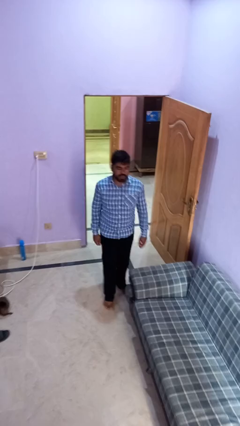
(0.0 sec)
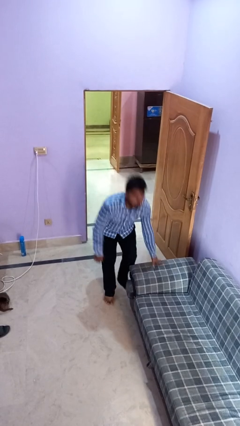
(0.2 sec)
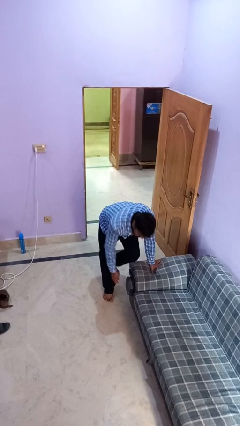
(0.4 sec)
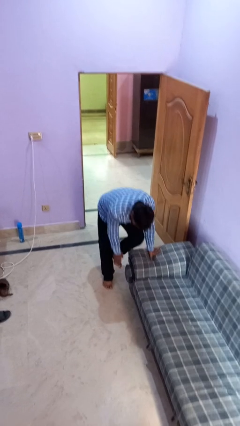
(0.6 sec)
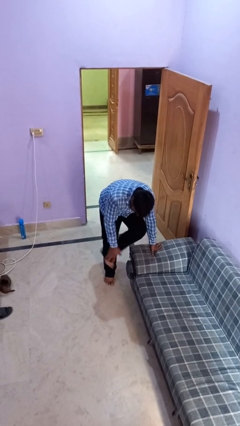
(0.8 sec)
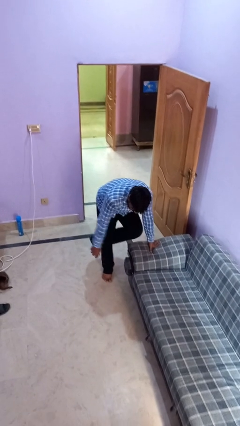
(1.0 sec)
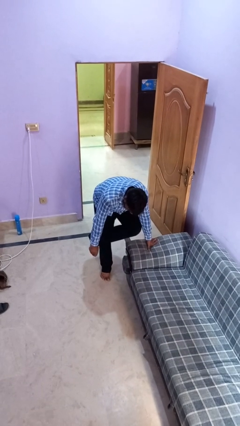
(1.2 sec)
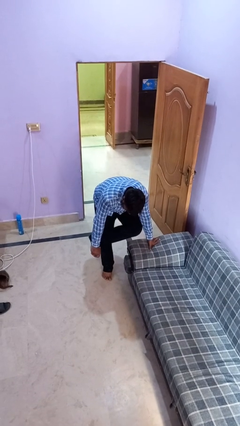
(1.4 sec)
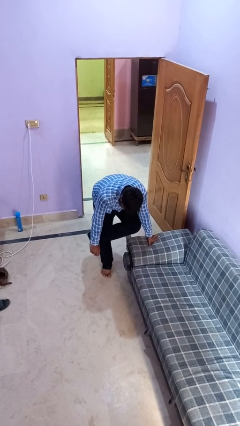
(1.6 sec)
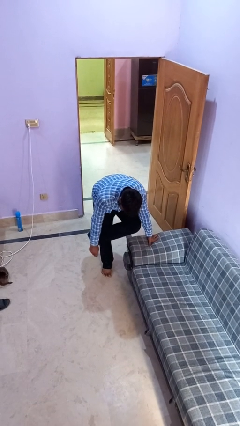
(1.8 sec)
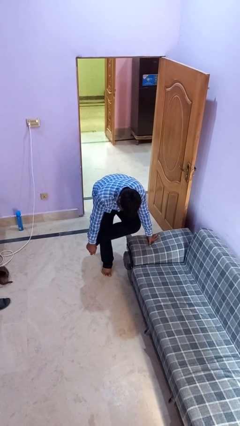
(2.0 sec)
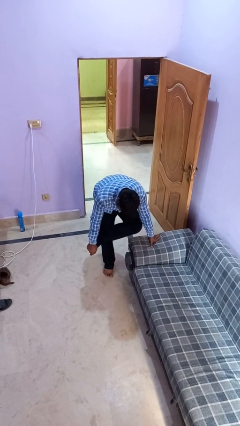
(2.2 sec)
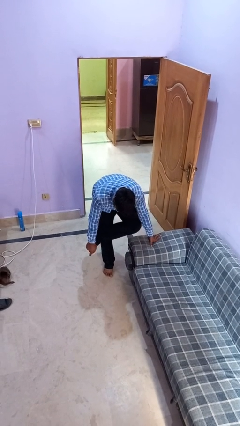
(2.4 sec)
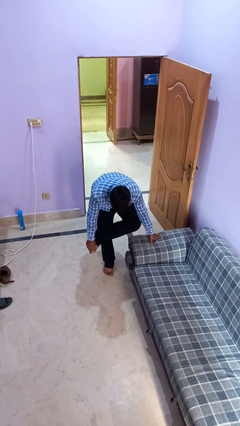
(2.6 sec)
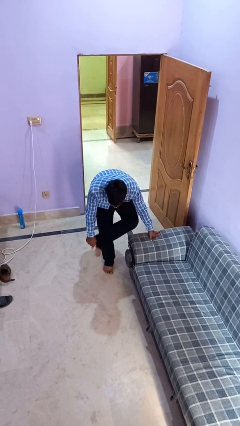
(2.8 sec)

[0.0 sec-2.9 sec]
person stubs toe

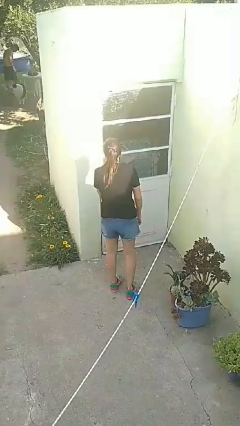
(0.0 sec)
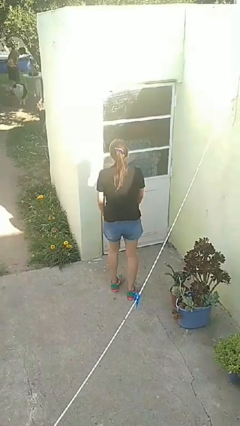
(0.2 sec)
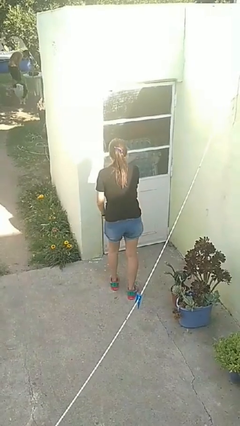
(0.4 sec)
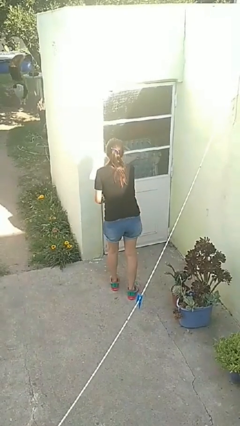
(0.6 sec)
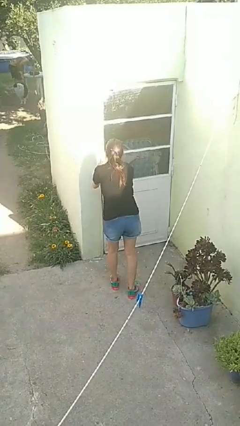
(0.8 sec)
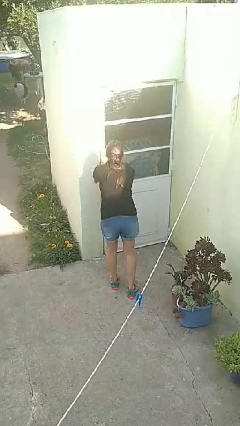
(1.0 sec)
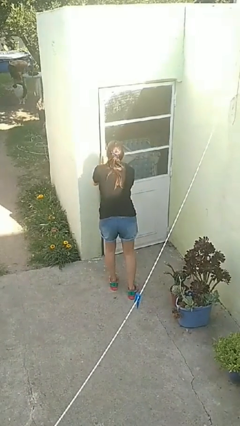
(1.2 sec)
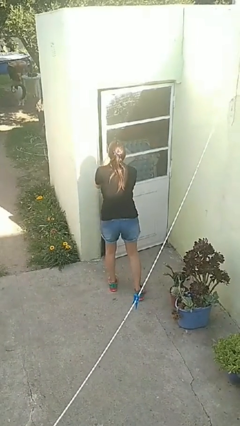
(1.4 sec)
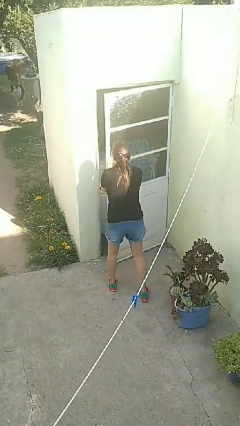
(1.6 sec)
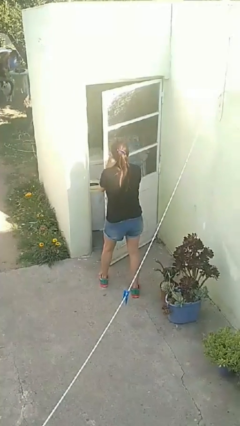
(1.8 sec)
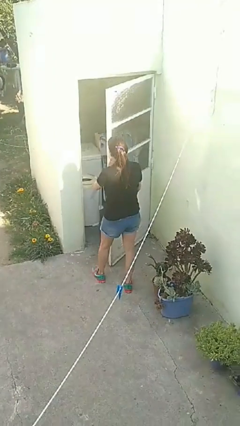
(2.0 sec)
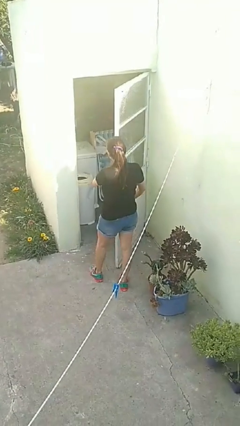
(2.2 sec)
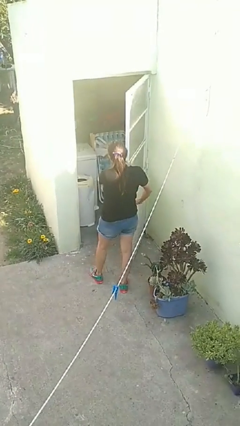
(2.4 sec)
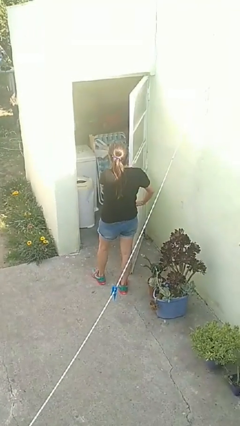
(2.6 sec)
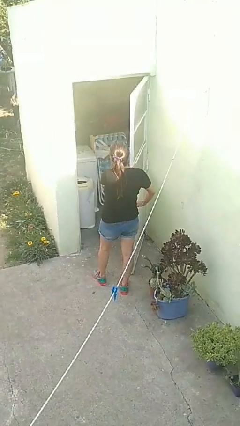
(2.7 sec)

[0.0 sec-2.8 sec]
person opens facility door

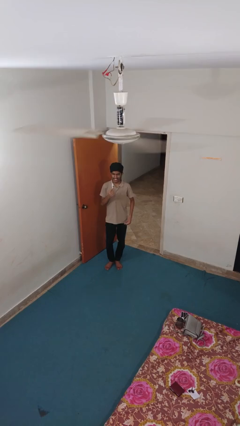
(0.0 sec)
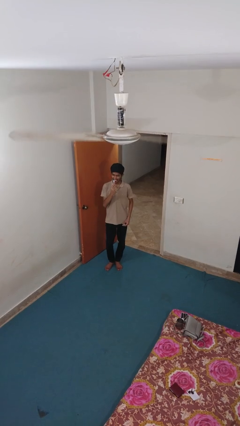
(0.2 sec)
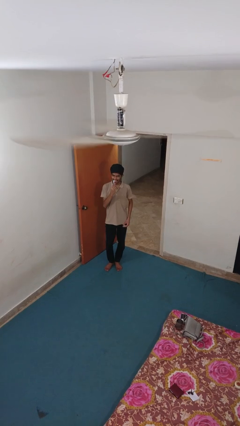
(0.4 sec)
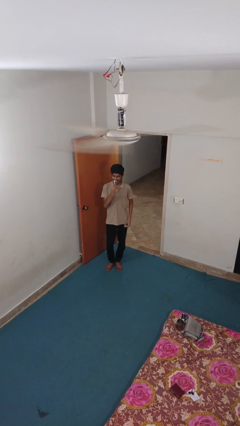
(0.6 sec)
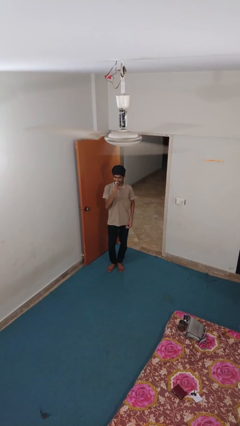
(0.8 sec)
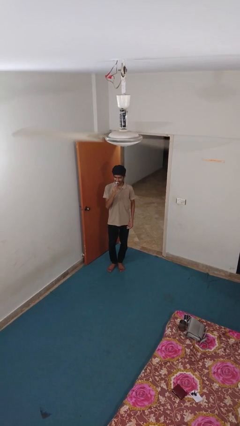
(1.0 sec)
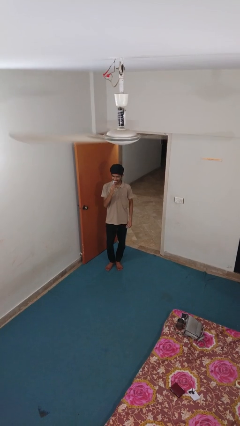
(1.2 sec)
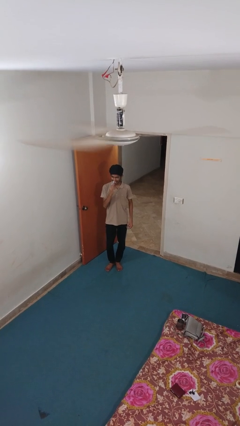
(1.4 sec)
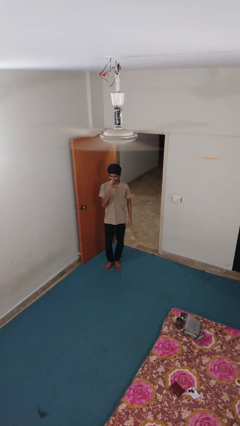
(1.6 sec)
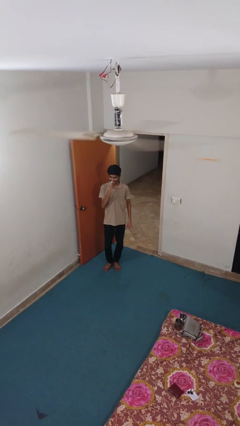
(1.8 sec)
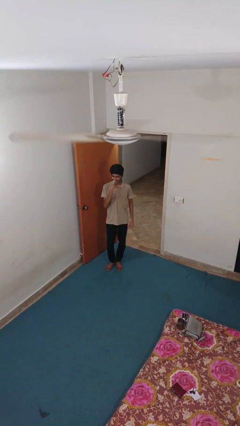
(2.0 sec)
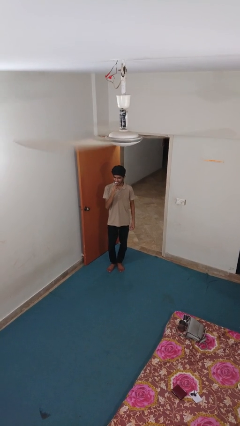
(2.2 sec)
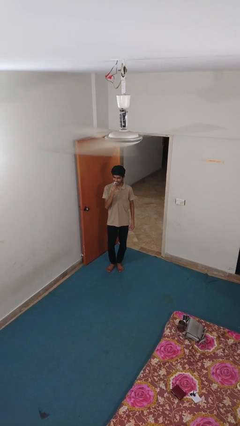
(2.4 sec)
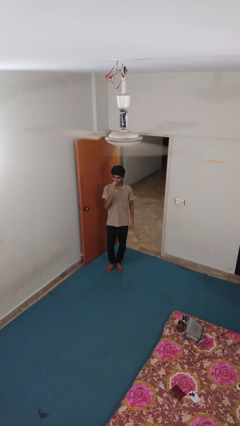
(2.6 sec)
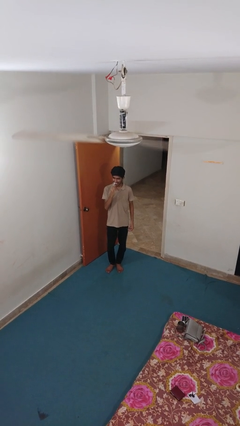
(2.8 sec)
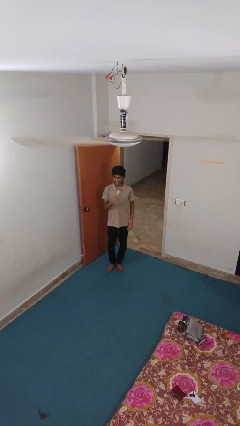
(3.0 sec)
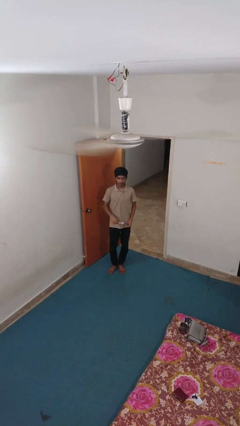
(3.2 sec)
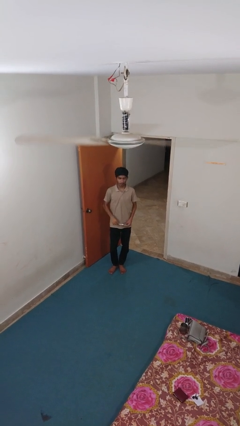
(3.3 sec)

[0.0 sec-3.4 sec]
person brushes teeth

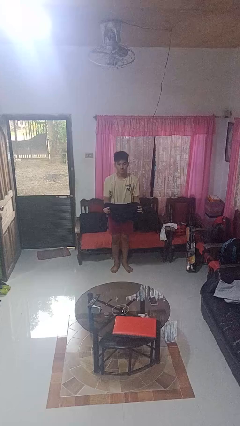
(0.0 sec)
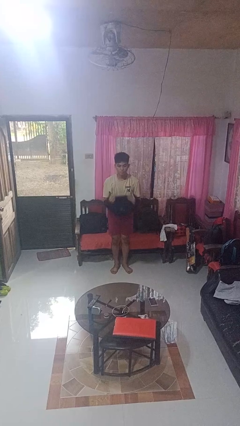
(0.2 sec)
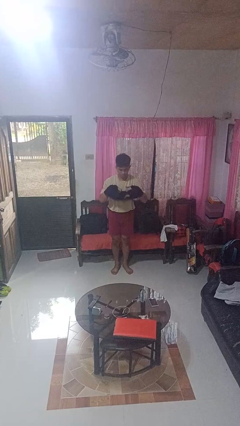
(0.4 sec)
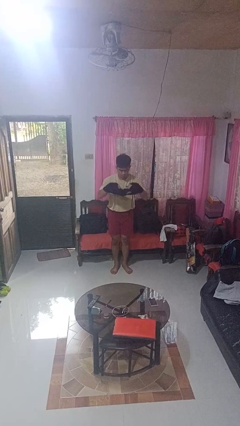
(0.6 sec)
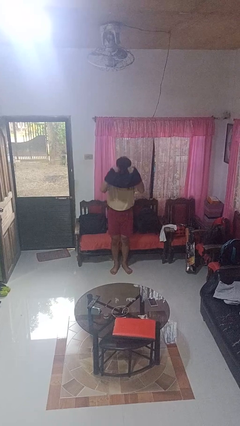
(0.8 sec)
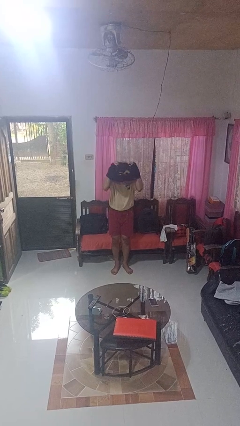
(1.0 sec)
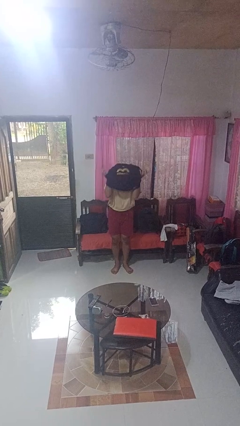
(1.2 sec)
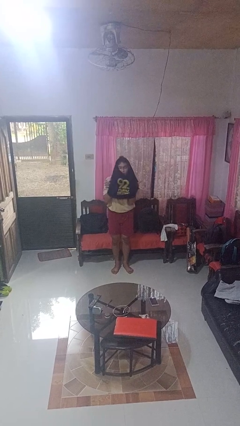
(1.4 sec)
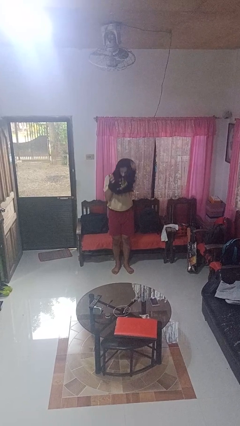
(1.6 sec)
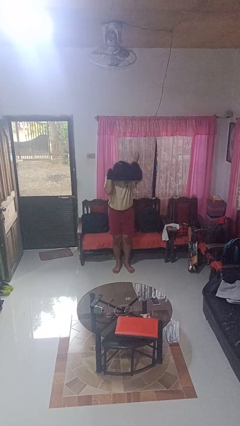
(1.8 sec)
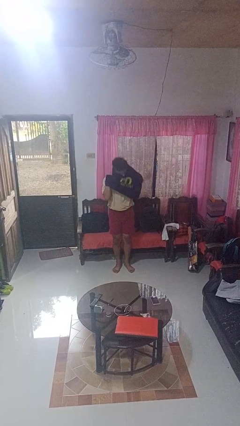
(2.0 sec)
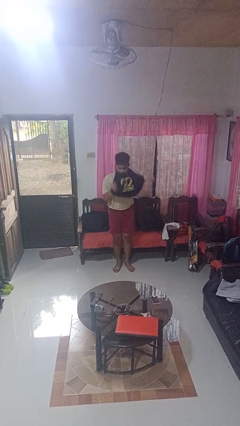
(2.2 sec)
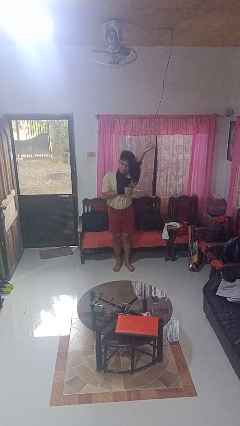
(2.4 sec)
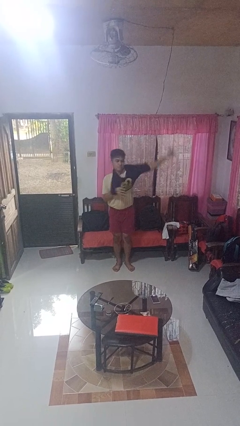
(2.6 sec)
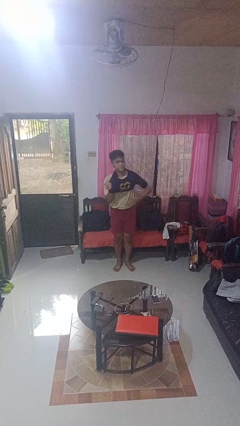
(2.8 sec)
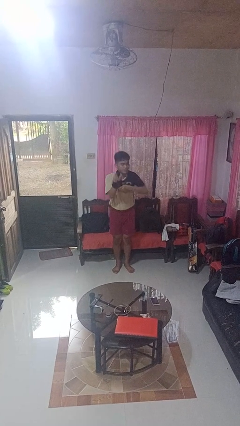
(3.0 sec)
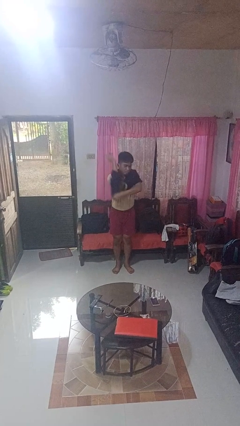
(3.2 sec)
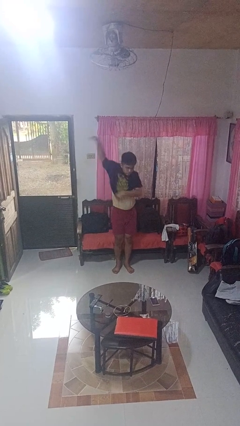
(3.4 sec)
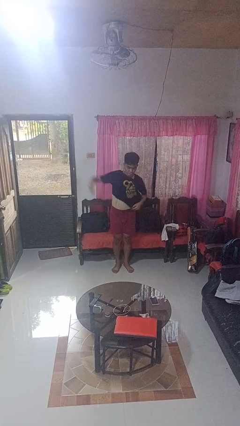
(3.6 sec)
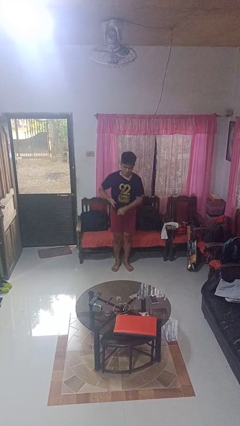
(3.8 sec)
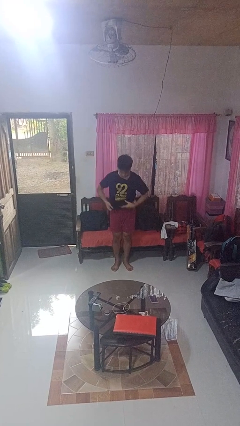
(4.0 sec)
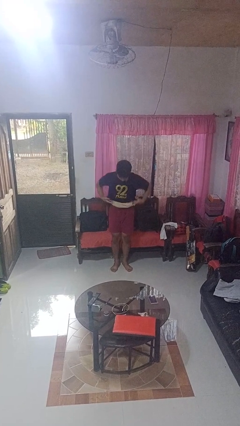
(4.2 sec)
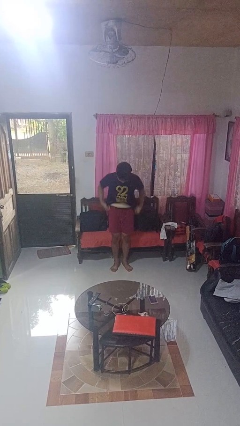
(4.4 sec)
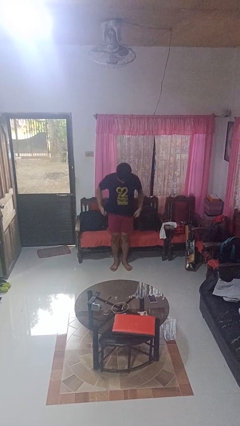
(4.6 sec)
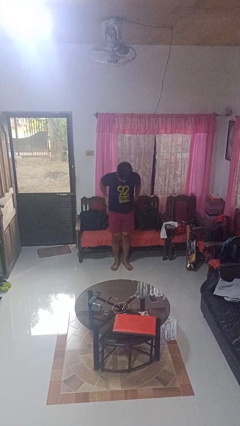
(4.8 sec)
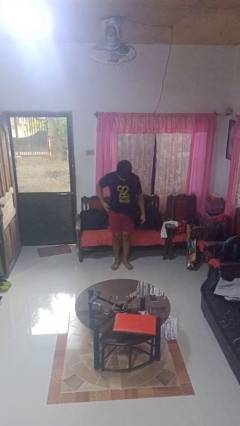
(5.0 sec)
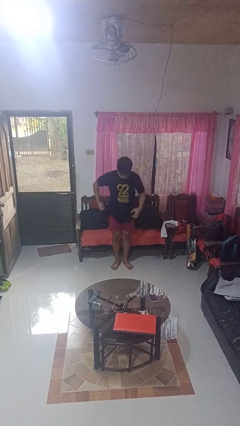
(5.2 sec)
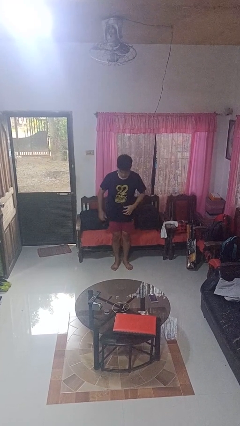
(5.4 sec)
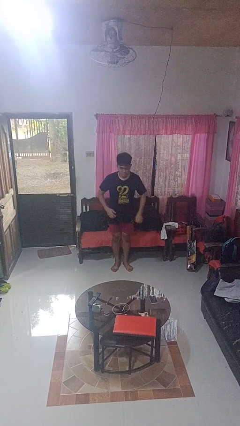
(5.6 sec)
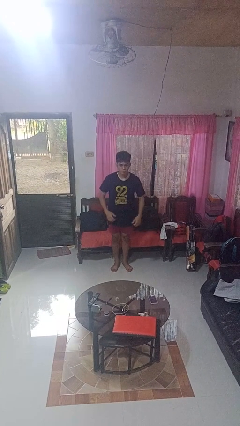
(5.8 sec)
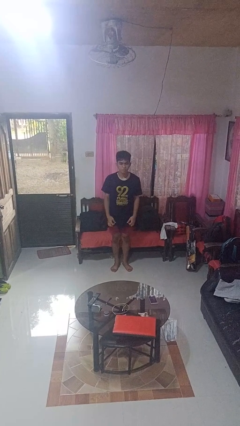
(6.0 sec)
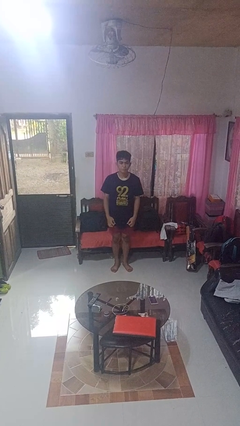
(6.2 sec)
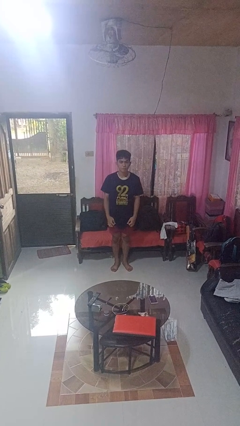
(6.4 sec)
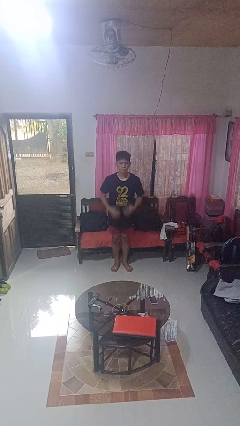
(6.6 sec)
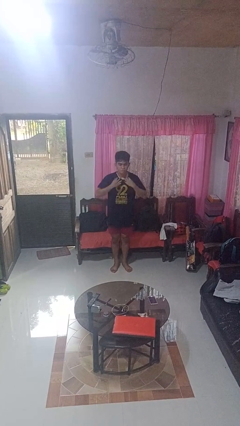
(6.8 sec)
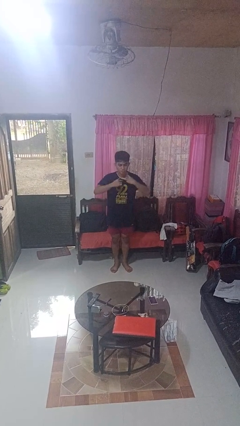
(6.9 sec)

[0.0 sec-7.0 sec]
person puts on shirt

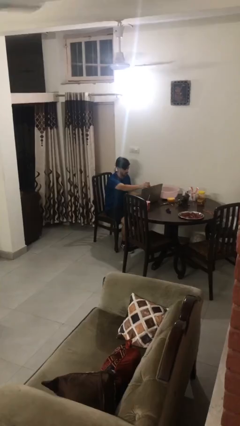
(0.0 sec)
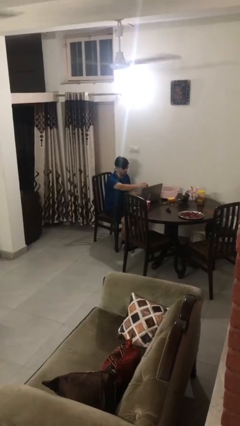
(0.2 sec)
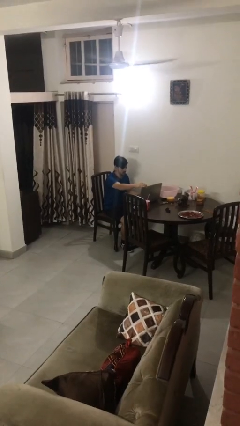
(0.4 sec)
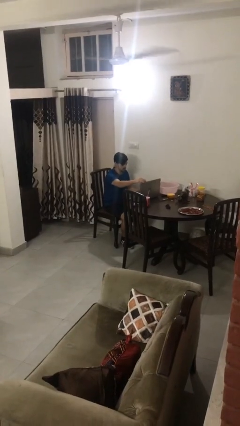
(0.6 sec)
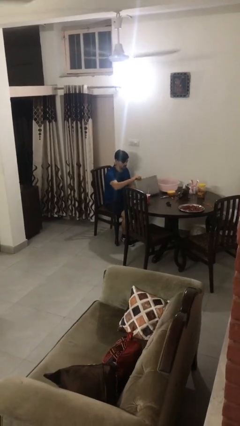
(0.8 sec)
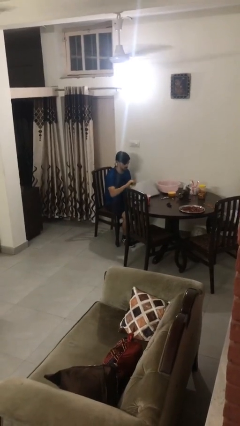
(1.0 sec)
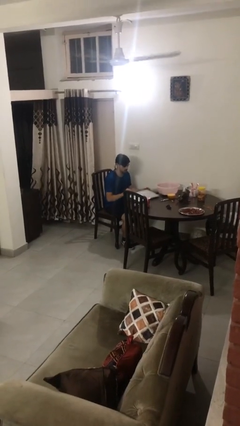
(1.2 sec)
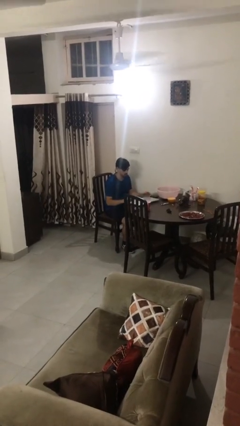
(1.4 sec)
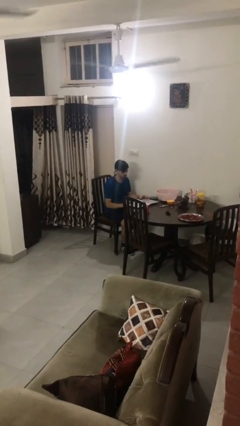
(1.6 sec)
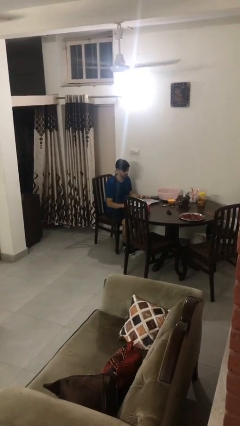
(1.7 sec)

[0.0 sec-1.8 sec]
person closes laptop
